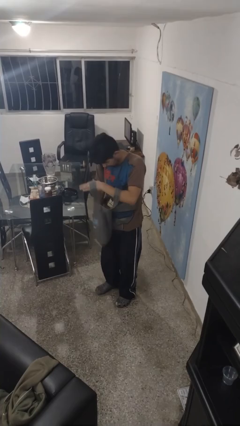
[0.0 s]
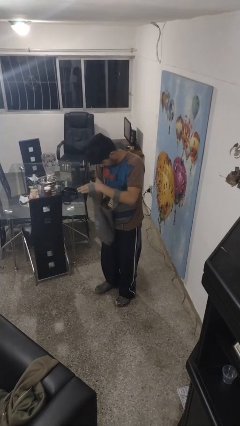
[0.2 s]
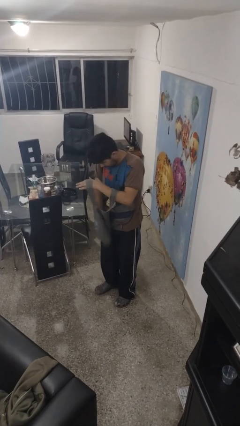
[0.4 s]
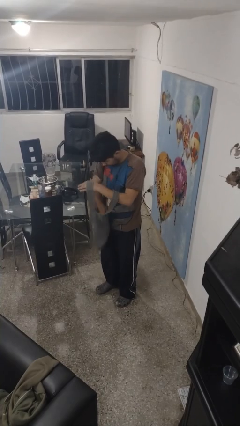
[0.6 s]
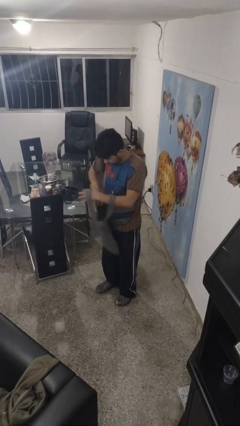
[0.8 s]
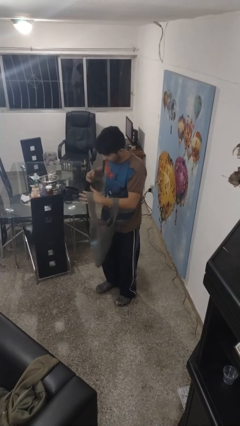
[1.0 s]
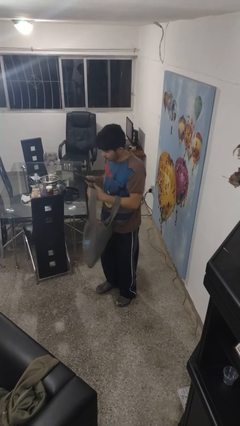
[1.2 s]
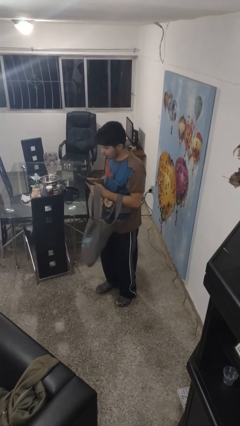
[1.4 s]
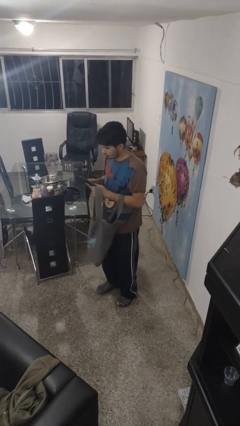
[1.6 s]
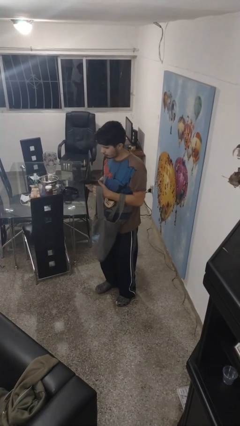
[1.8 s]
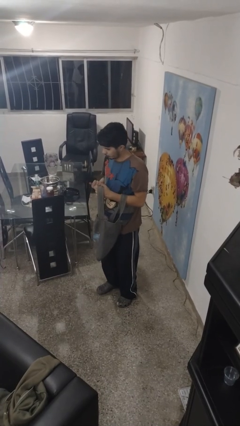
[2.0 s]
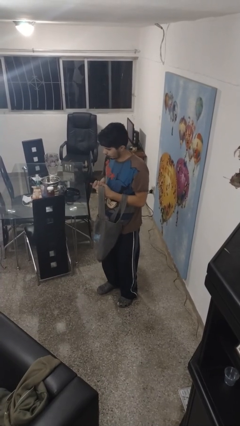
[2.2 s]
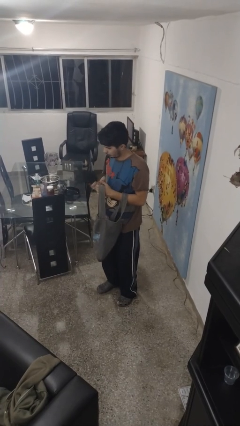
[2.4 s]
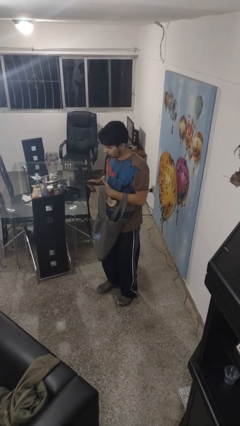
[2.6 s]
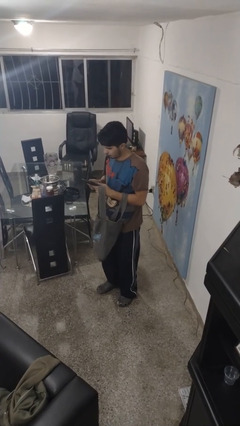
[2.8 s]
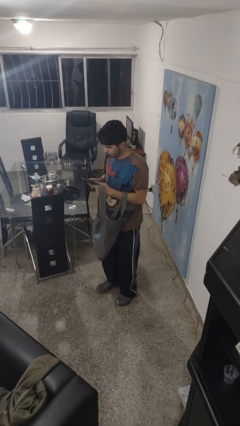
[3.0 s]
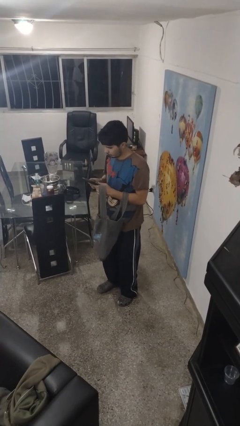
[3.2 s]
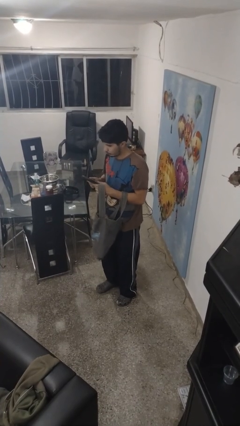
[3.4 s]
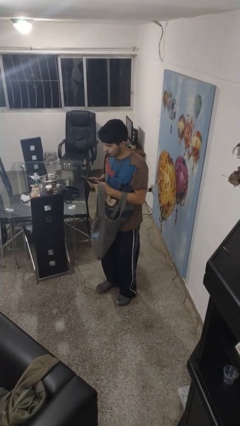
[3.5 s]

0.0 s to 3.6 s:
person takes object from purse

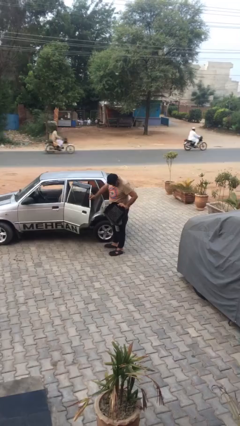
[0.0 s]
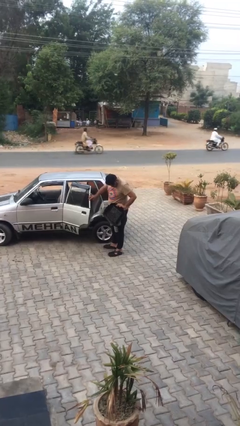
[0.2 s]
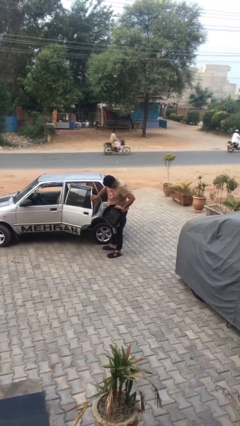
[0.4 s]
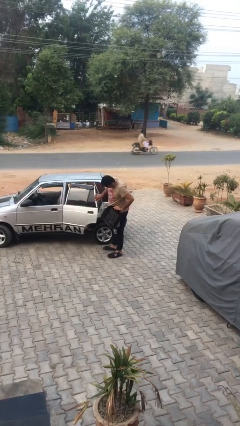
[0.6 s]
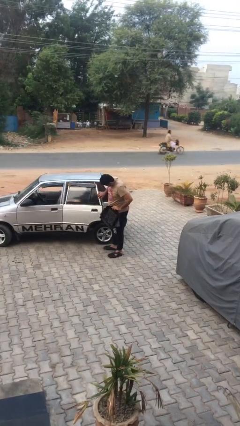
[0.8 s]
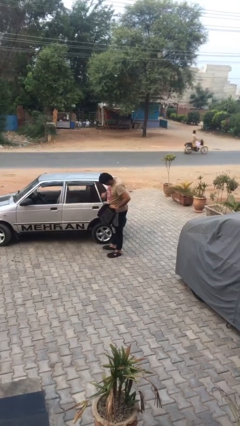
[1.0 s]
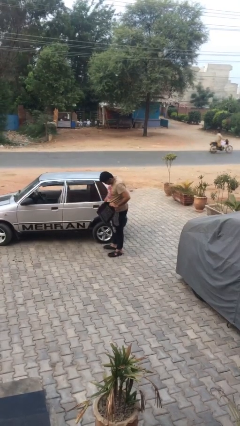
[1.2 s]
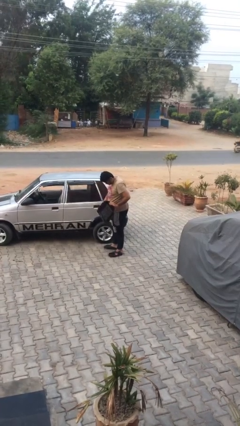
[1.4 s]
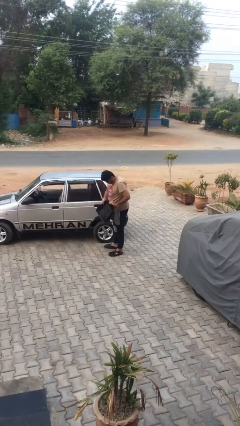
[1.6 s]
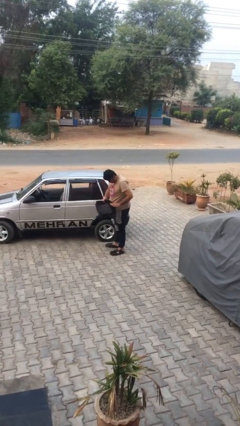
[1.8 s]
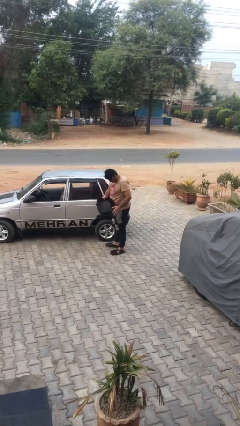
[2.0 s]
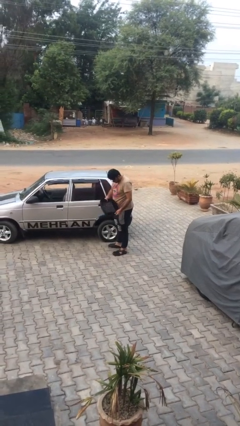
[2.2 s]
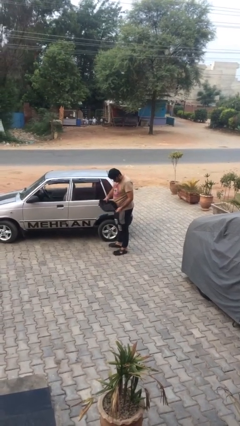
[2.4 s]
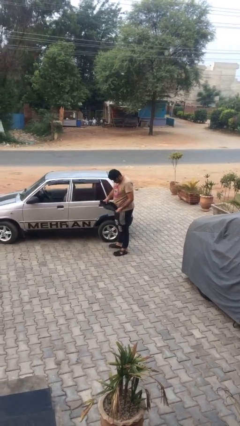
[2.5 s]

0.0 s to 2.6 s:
person closes car door

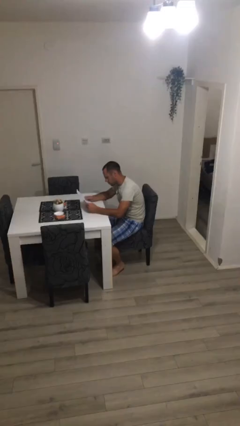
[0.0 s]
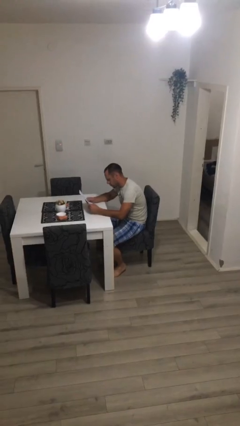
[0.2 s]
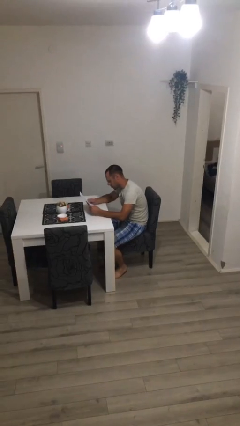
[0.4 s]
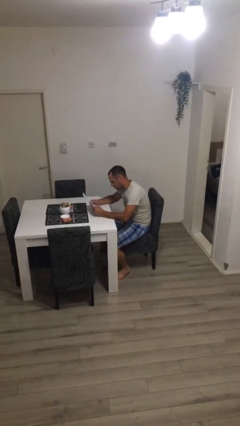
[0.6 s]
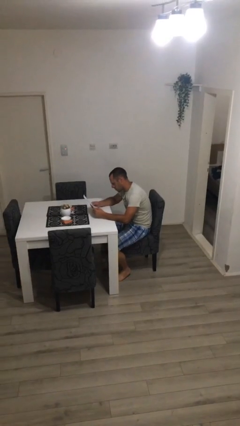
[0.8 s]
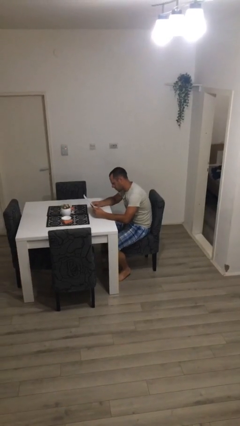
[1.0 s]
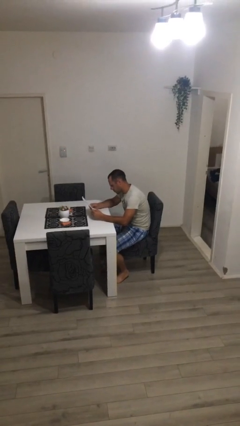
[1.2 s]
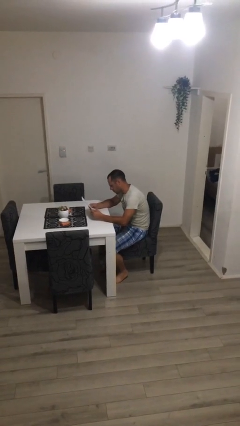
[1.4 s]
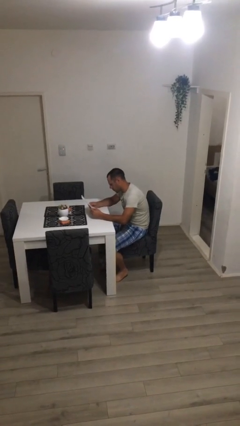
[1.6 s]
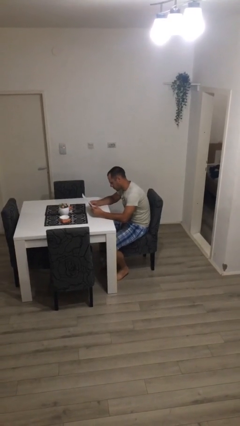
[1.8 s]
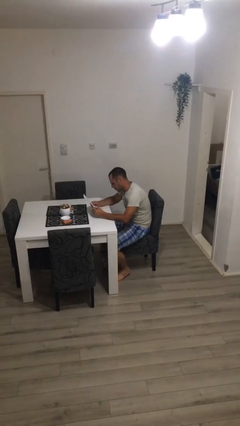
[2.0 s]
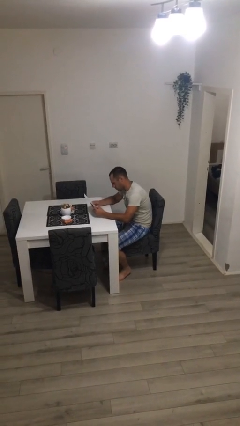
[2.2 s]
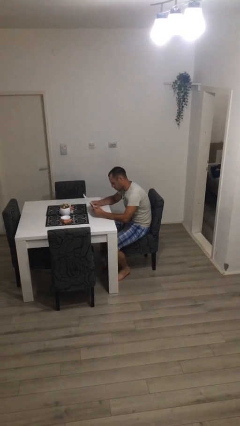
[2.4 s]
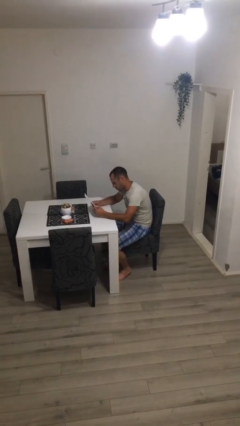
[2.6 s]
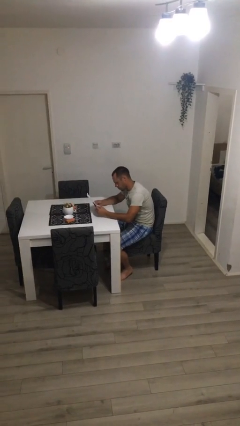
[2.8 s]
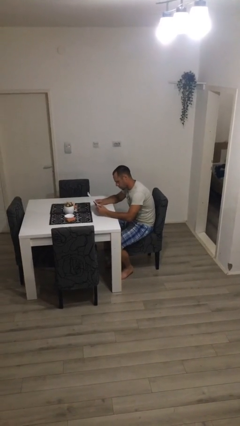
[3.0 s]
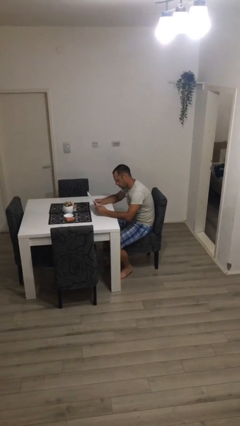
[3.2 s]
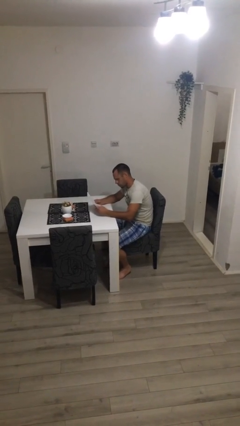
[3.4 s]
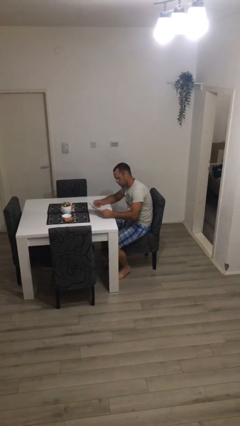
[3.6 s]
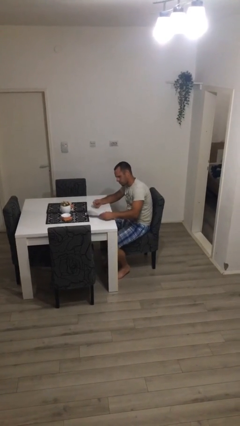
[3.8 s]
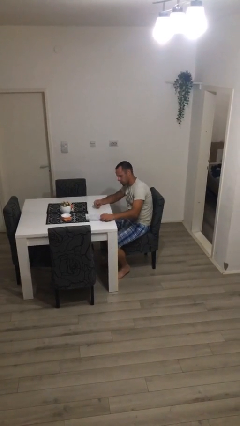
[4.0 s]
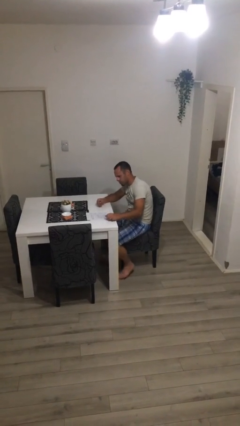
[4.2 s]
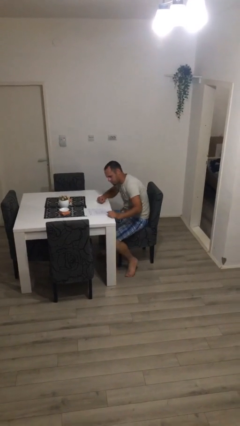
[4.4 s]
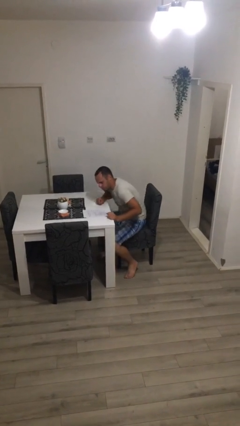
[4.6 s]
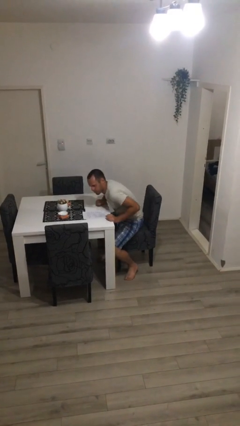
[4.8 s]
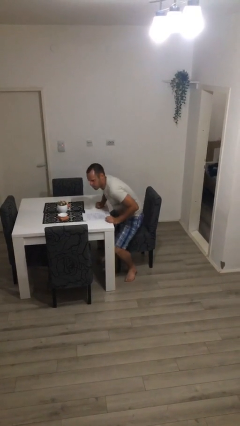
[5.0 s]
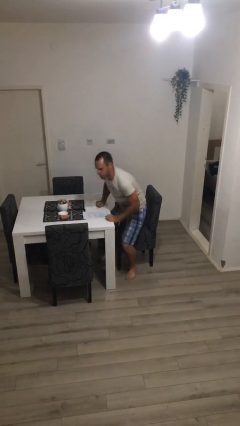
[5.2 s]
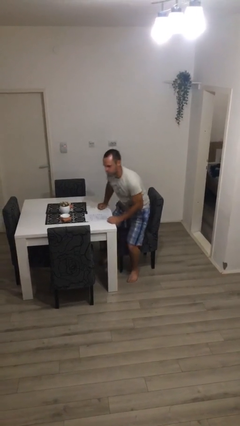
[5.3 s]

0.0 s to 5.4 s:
person reads document

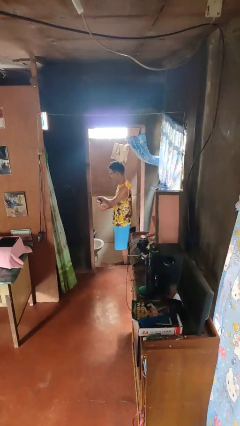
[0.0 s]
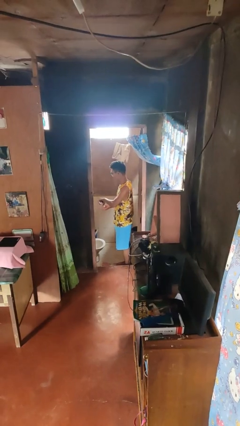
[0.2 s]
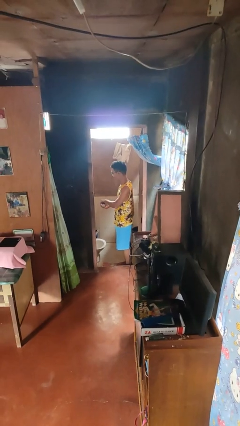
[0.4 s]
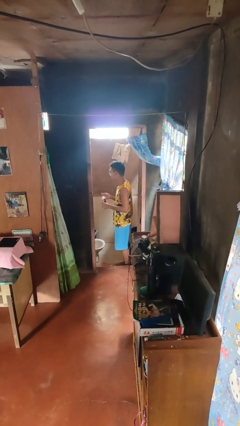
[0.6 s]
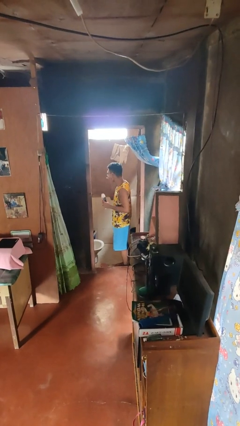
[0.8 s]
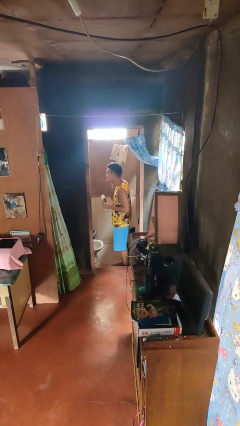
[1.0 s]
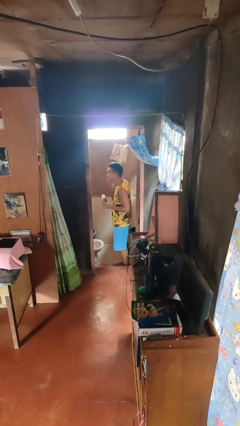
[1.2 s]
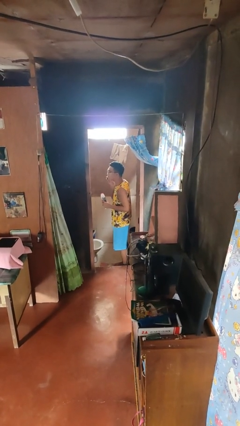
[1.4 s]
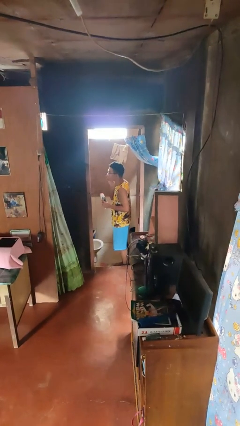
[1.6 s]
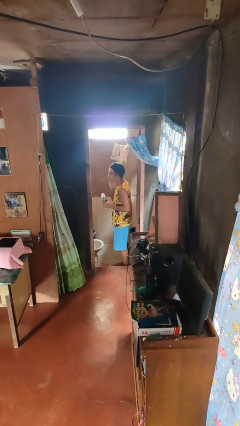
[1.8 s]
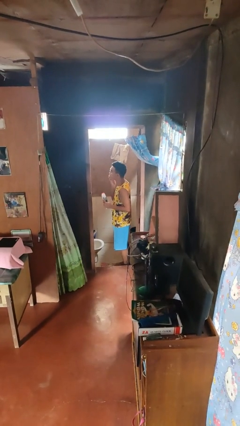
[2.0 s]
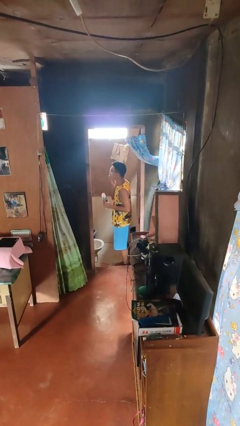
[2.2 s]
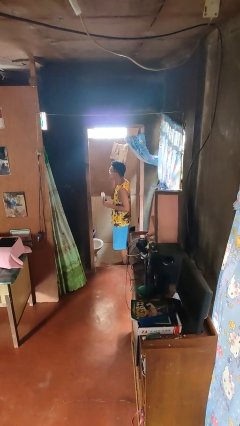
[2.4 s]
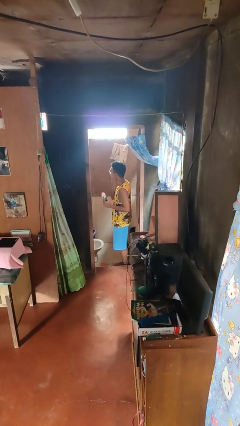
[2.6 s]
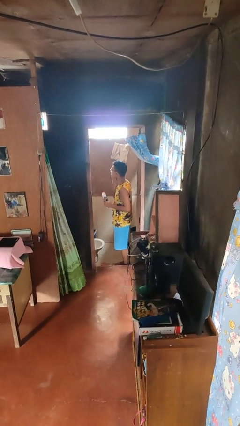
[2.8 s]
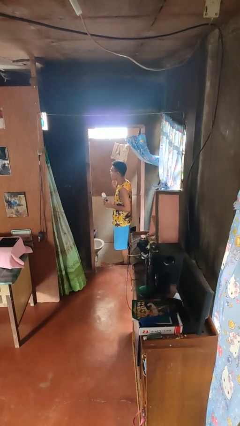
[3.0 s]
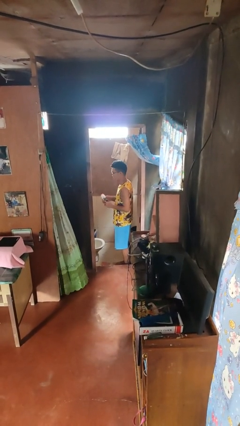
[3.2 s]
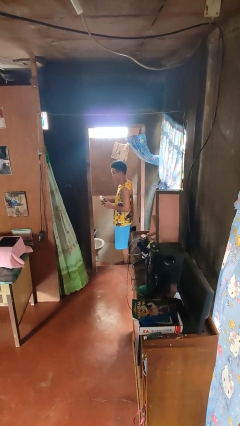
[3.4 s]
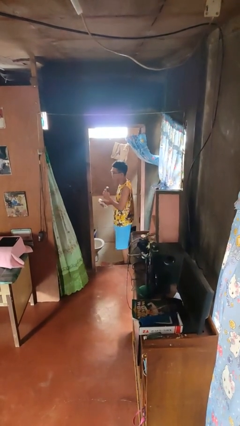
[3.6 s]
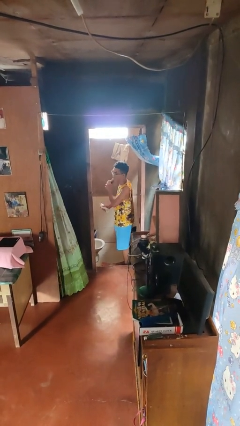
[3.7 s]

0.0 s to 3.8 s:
person applies shaving cream

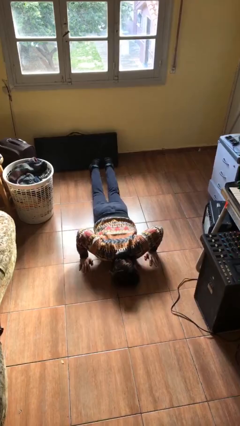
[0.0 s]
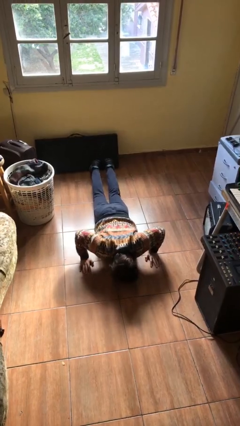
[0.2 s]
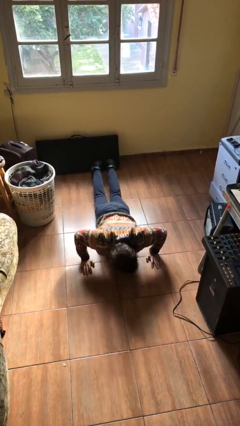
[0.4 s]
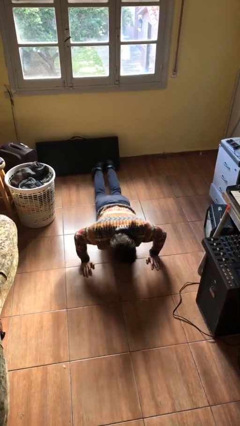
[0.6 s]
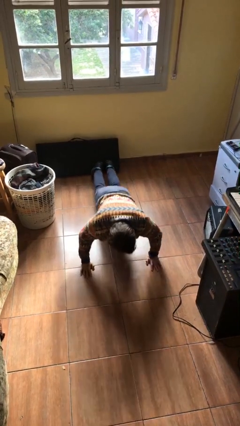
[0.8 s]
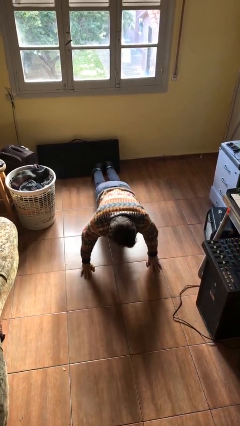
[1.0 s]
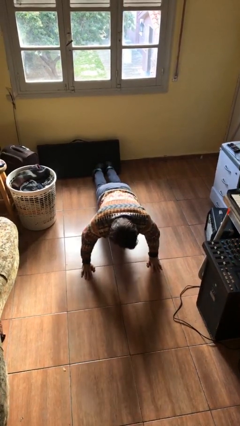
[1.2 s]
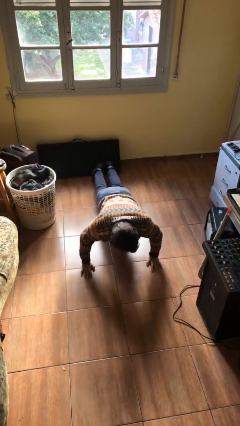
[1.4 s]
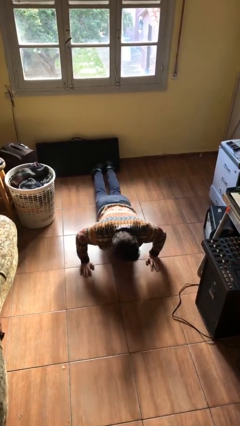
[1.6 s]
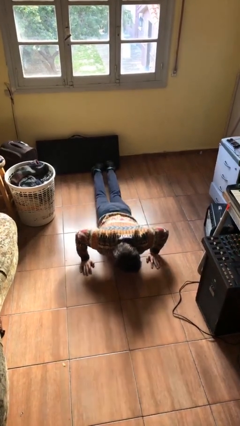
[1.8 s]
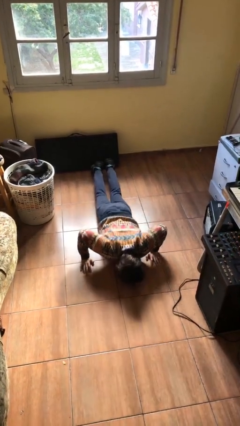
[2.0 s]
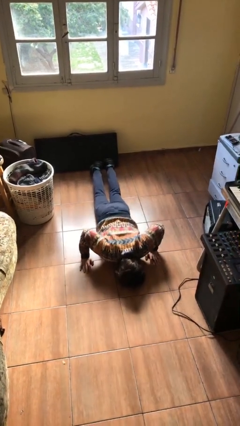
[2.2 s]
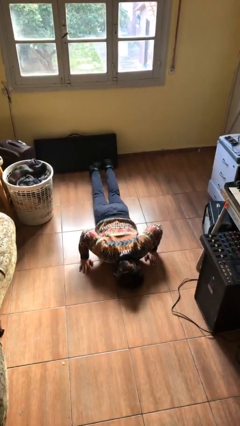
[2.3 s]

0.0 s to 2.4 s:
person exercises with pushup
